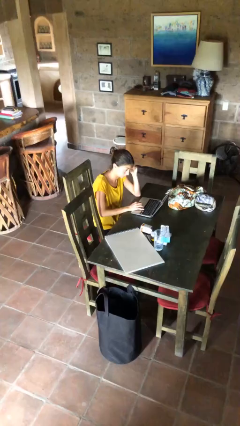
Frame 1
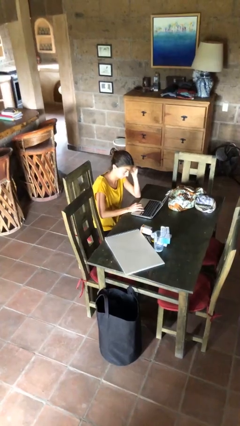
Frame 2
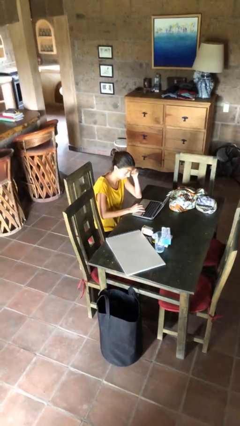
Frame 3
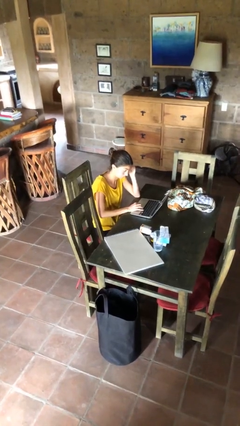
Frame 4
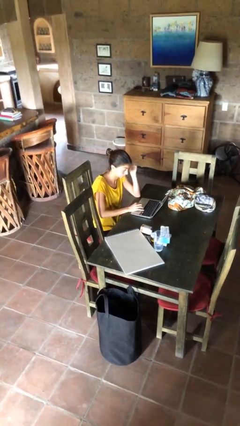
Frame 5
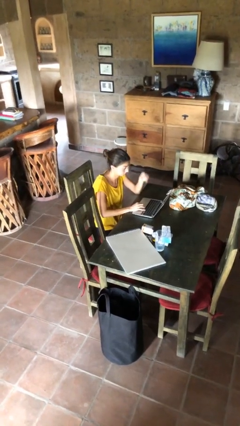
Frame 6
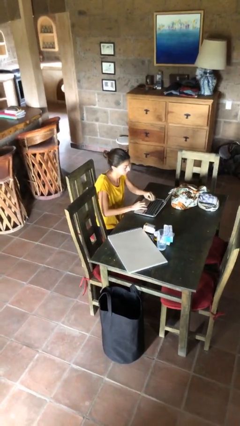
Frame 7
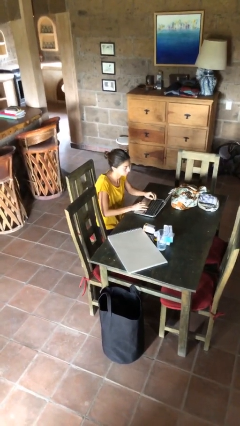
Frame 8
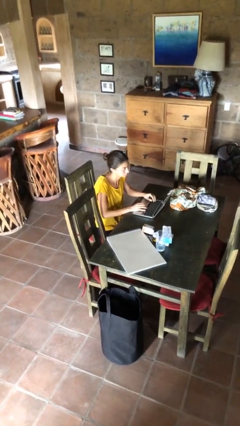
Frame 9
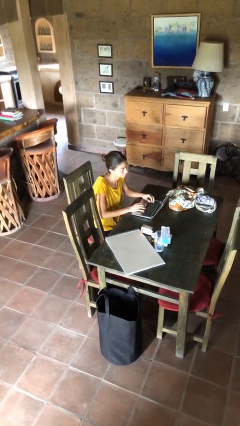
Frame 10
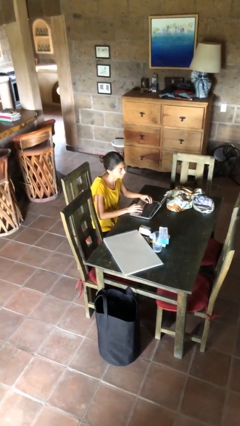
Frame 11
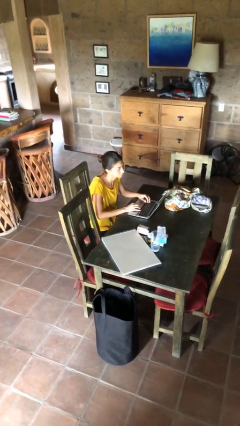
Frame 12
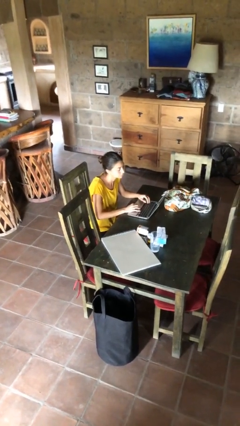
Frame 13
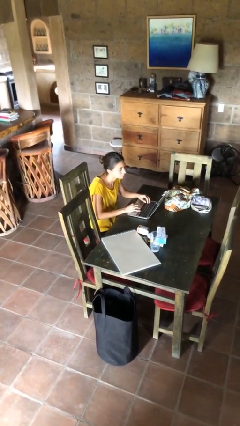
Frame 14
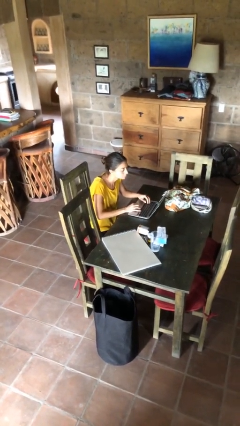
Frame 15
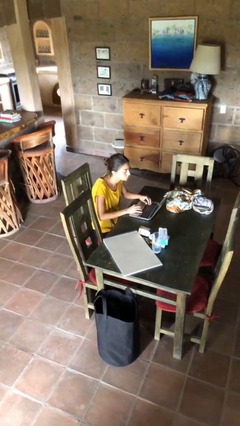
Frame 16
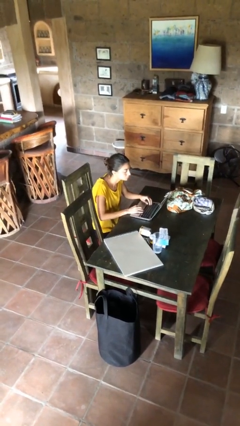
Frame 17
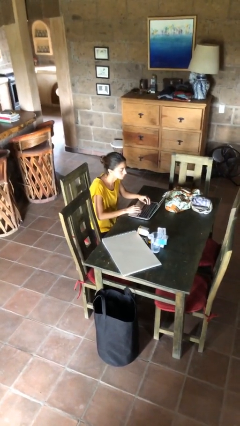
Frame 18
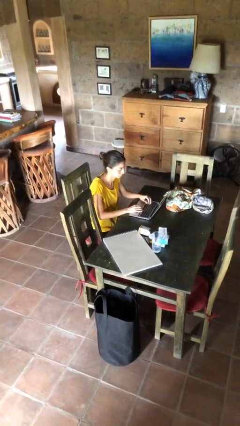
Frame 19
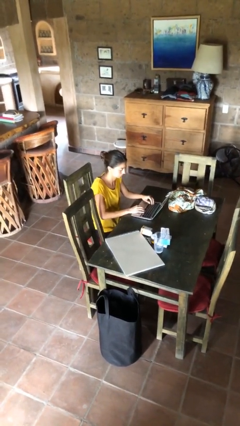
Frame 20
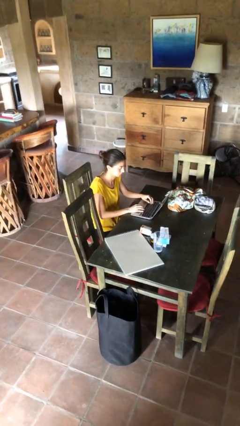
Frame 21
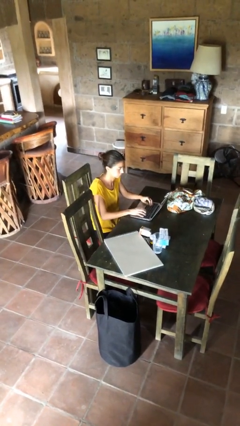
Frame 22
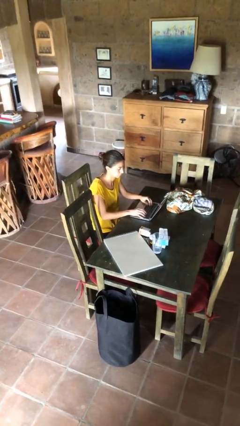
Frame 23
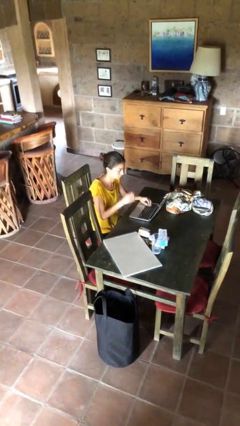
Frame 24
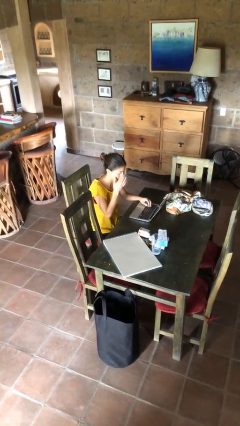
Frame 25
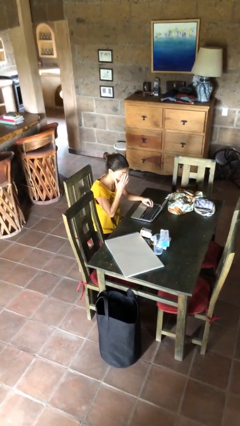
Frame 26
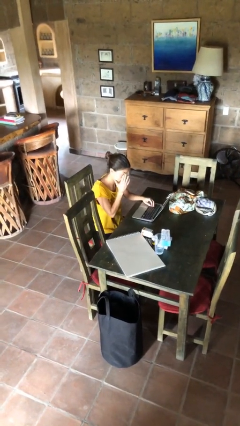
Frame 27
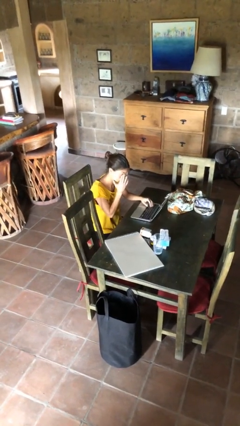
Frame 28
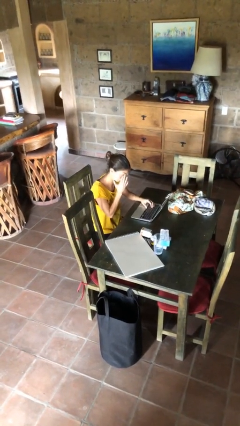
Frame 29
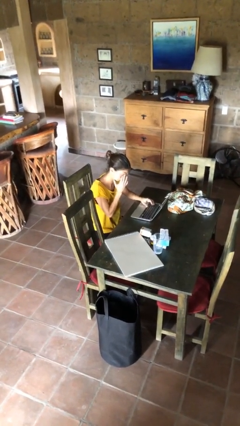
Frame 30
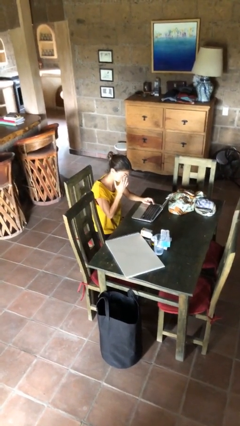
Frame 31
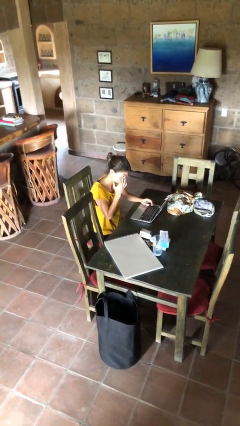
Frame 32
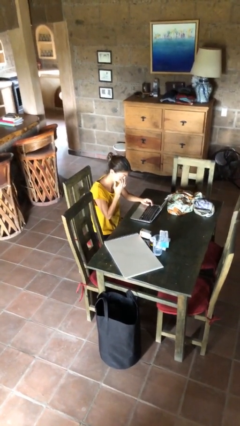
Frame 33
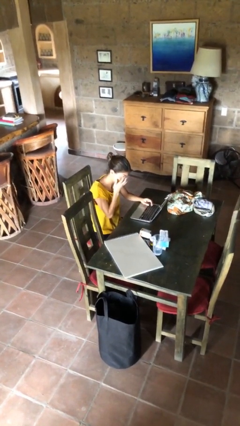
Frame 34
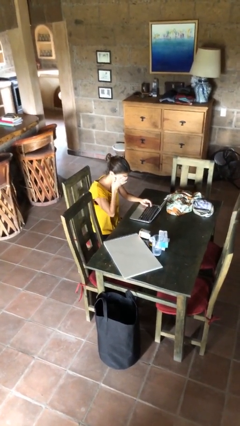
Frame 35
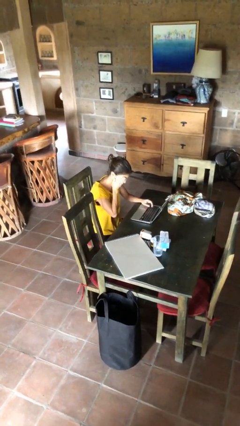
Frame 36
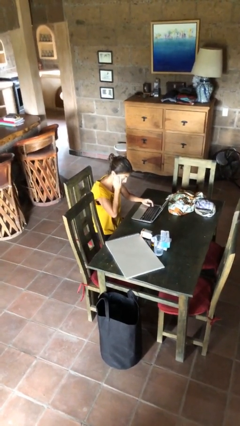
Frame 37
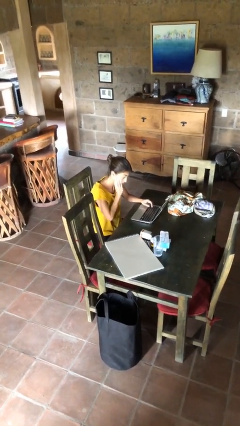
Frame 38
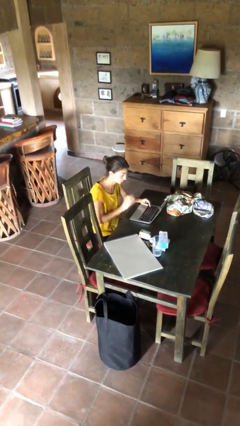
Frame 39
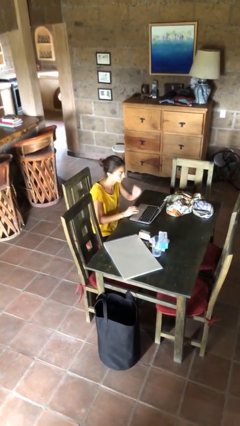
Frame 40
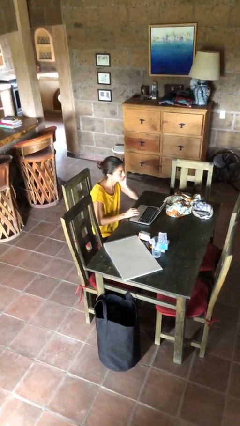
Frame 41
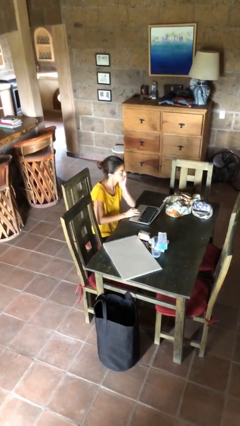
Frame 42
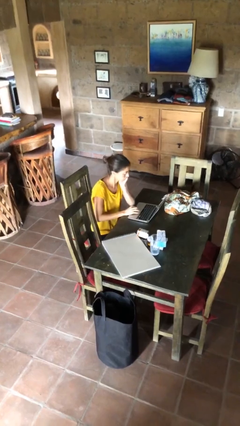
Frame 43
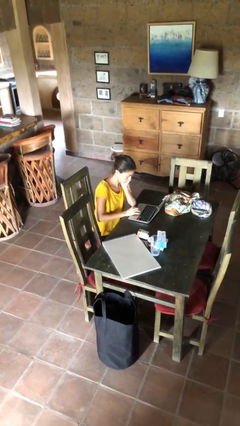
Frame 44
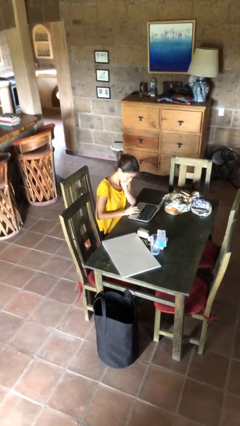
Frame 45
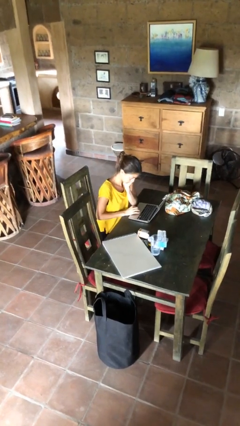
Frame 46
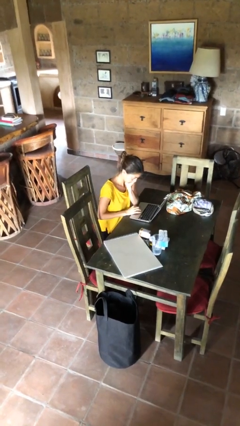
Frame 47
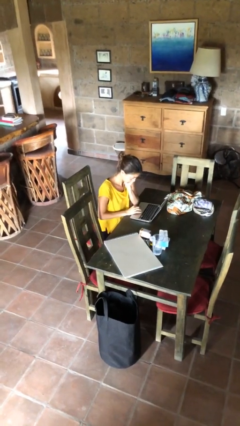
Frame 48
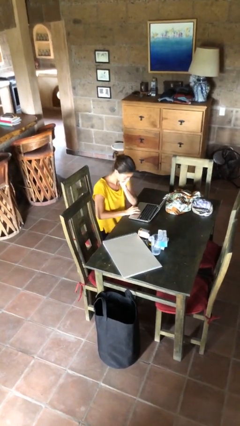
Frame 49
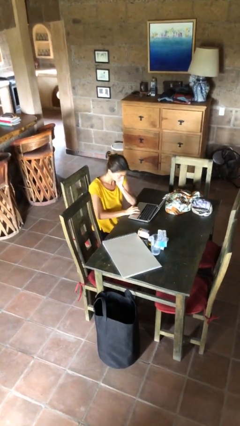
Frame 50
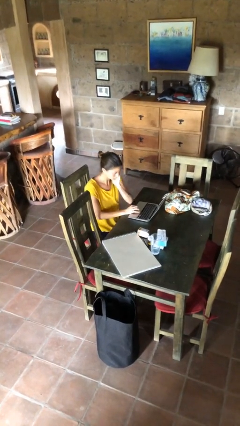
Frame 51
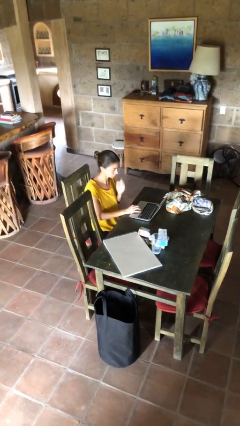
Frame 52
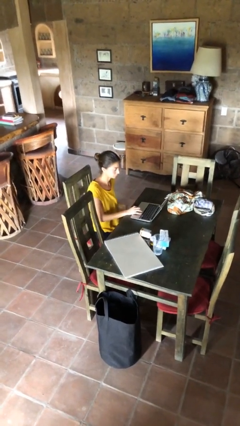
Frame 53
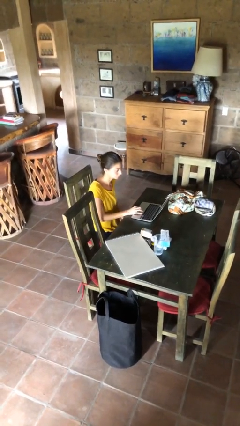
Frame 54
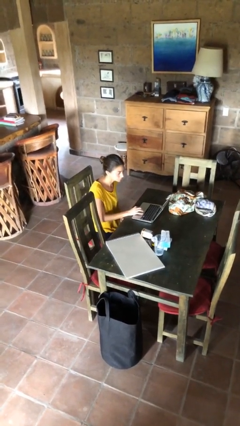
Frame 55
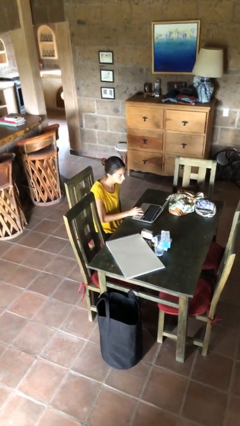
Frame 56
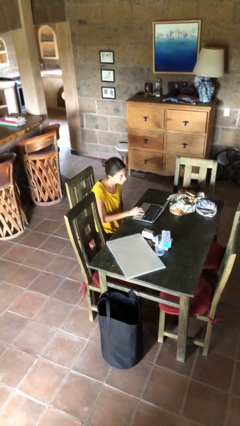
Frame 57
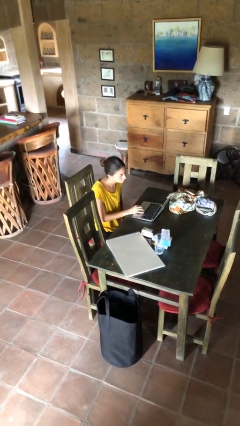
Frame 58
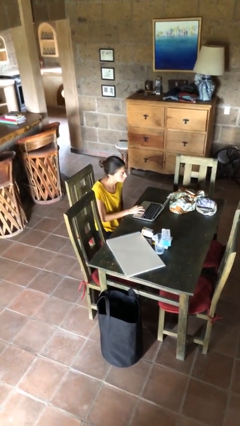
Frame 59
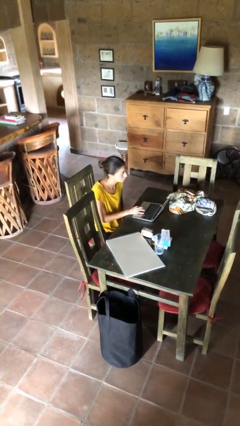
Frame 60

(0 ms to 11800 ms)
person interacts with laptop

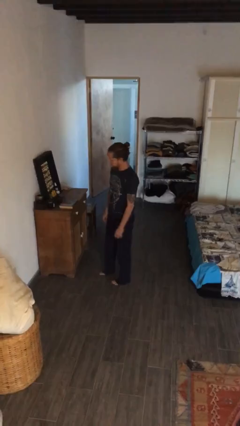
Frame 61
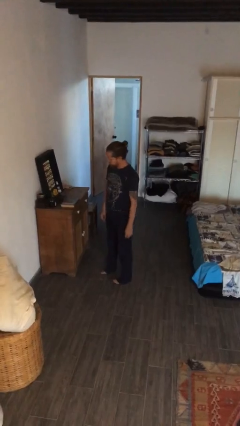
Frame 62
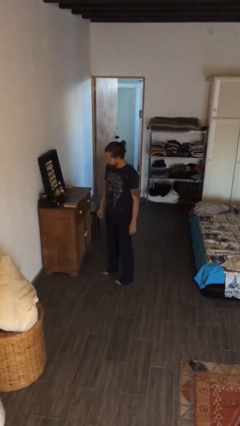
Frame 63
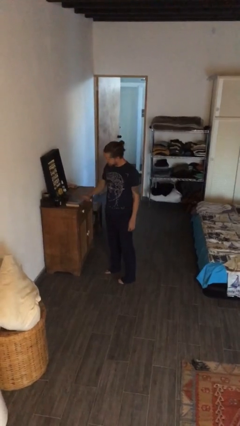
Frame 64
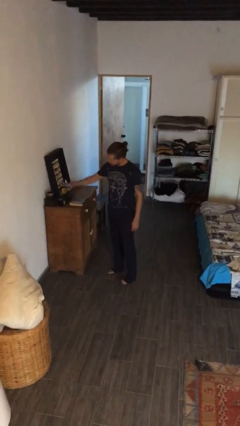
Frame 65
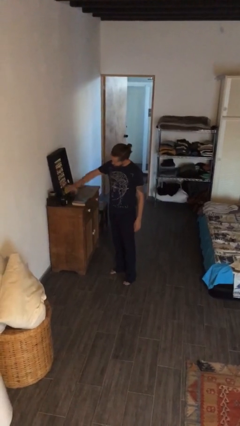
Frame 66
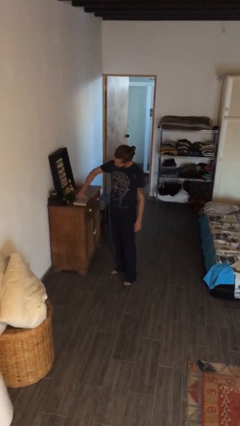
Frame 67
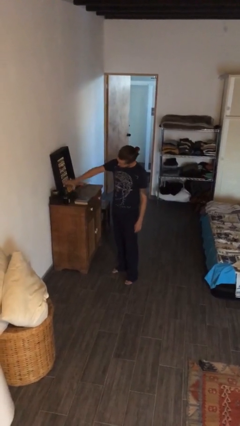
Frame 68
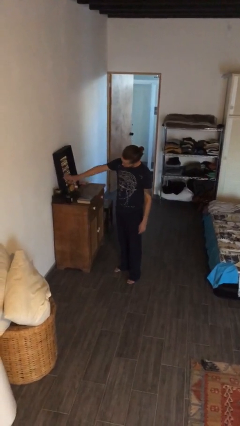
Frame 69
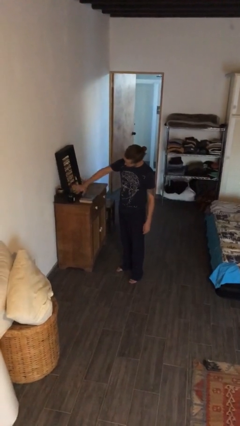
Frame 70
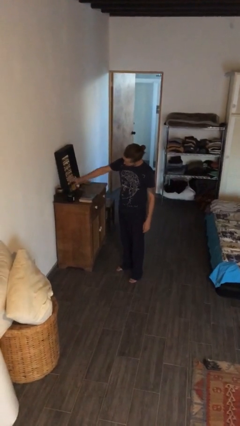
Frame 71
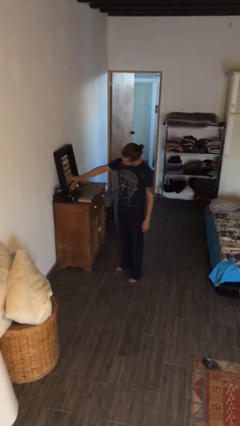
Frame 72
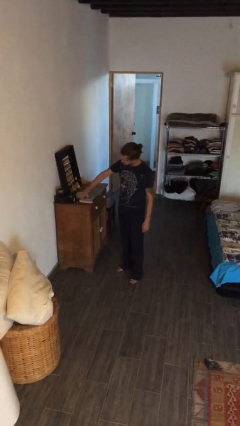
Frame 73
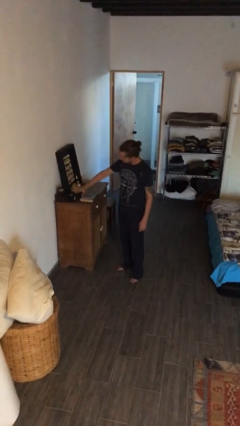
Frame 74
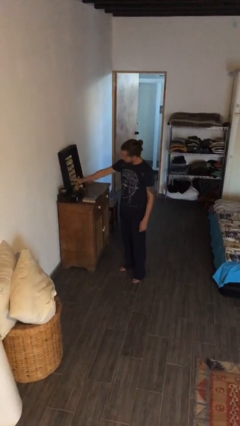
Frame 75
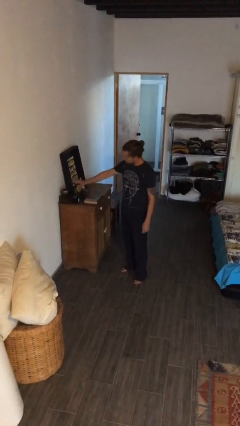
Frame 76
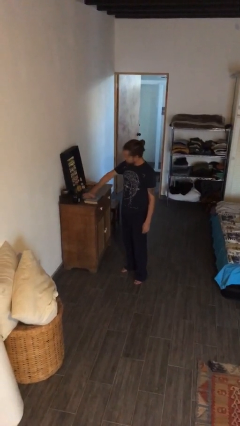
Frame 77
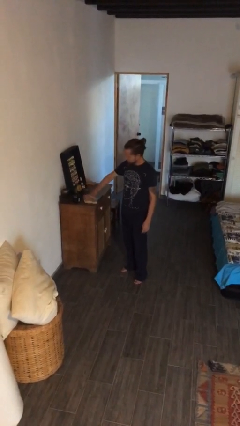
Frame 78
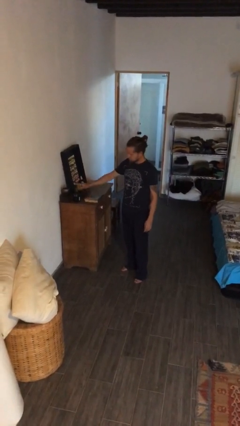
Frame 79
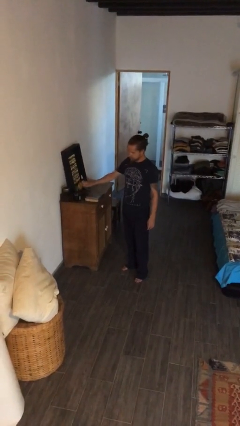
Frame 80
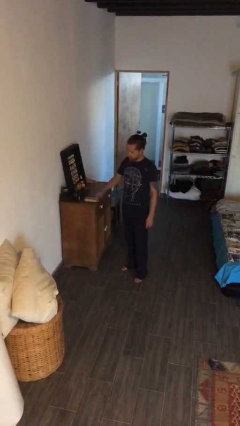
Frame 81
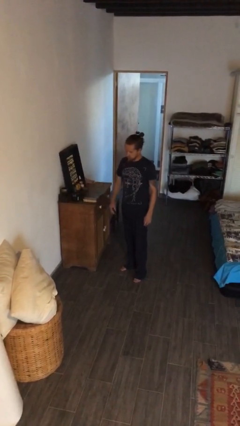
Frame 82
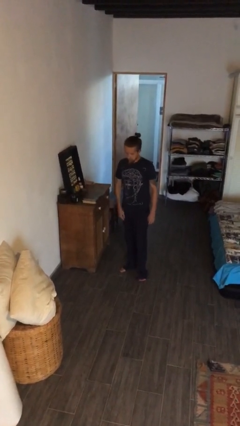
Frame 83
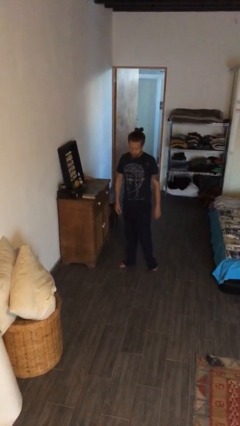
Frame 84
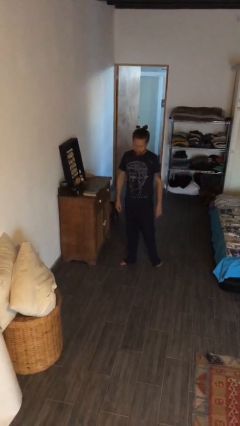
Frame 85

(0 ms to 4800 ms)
person waves hand over object

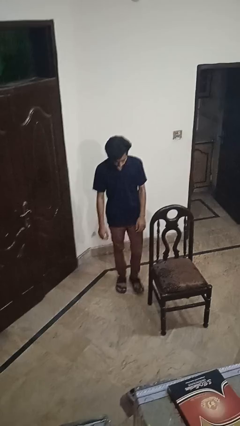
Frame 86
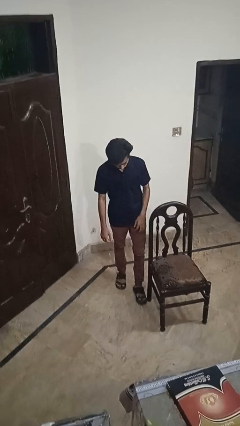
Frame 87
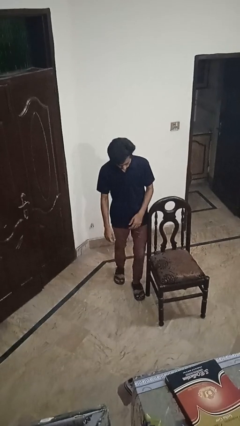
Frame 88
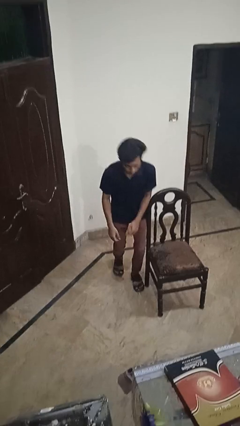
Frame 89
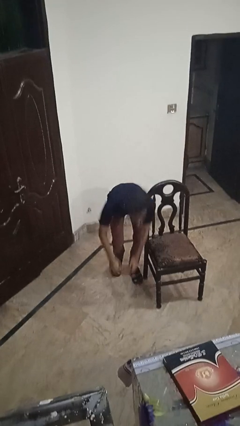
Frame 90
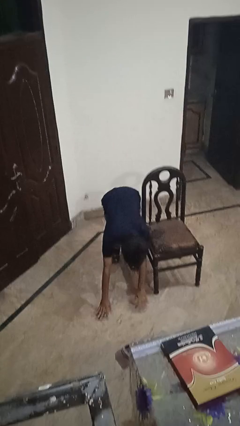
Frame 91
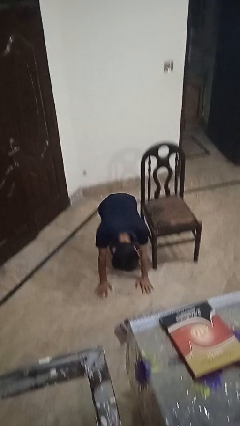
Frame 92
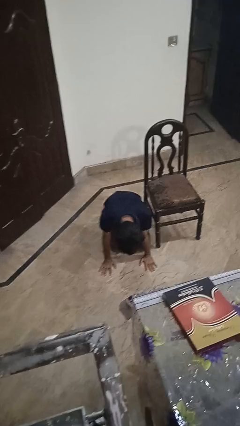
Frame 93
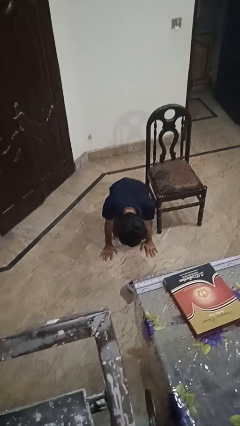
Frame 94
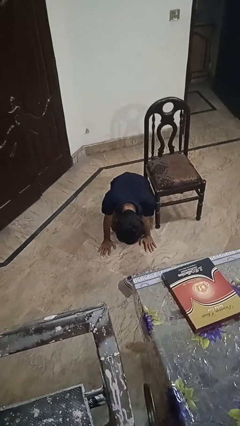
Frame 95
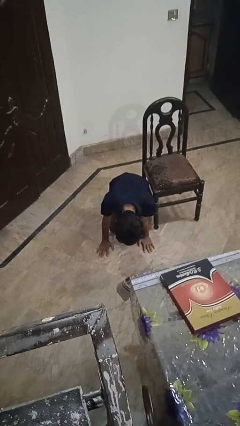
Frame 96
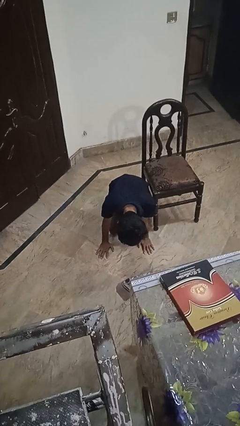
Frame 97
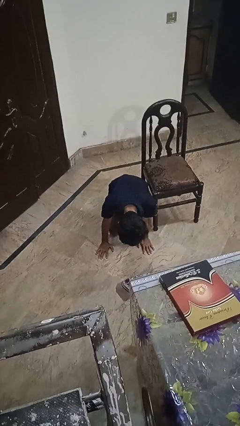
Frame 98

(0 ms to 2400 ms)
person trips on object on floor
